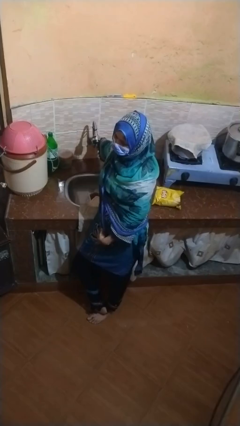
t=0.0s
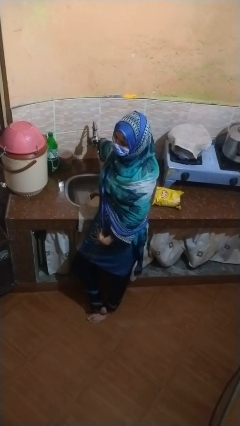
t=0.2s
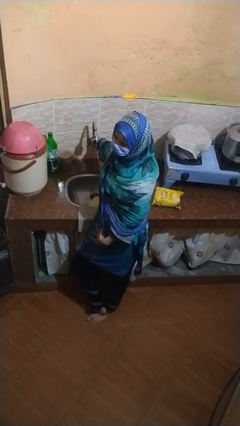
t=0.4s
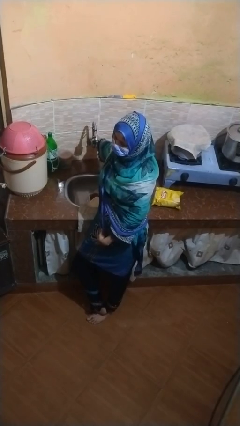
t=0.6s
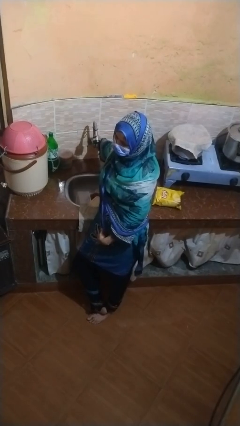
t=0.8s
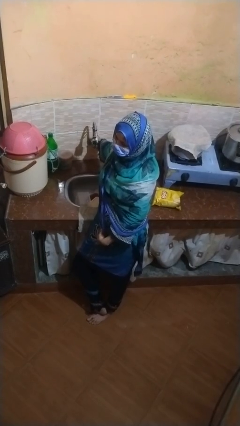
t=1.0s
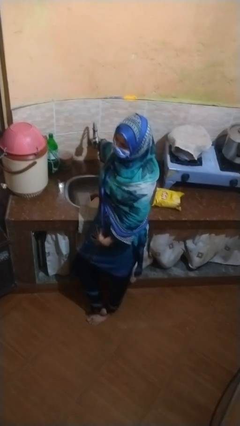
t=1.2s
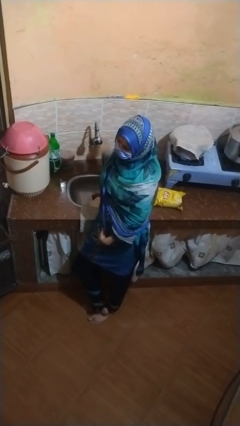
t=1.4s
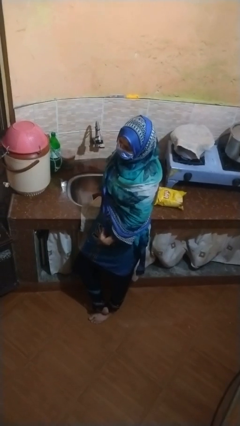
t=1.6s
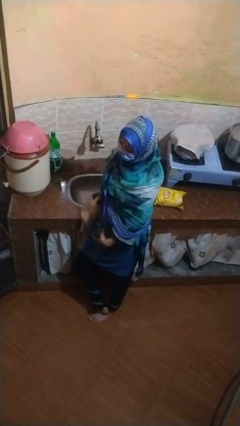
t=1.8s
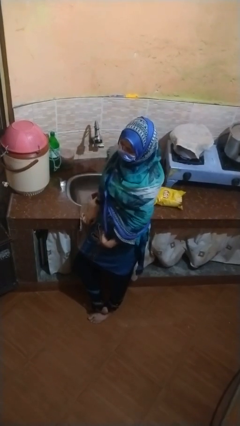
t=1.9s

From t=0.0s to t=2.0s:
person turns off faucet

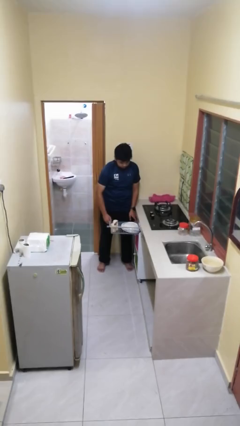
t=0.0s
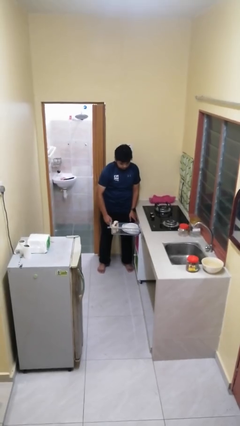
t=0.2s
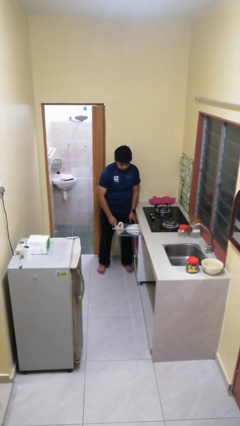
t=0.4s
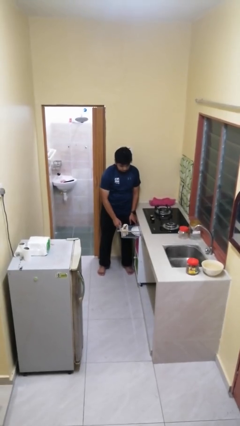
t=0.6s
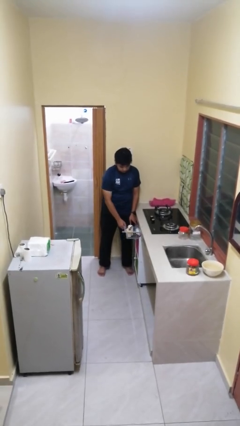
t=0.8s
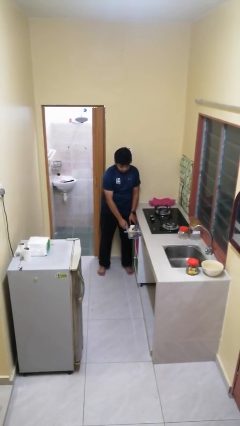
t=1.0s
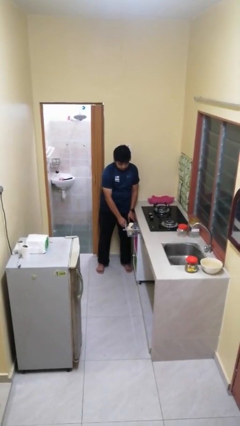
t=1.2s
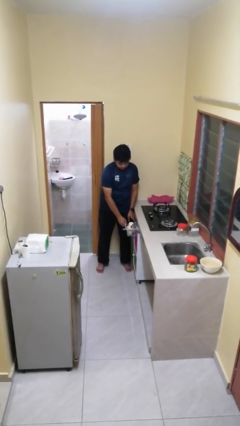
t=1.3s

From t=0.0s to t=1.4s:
person closes kitchen drawer

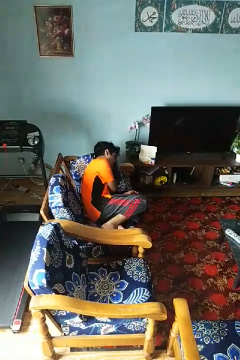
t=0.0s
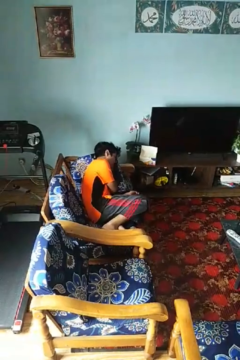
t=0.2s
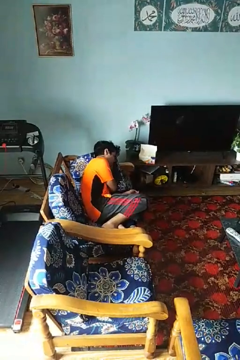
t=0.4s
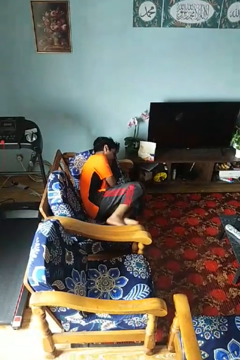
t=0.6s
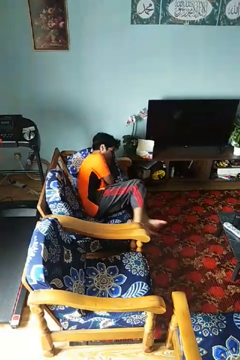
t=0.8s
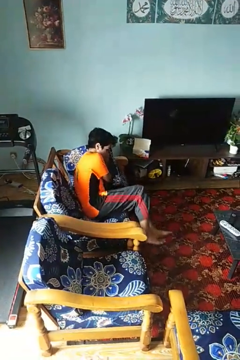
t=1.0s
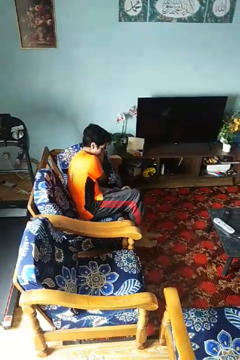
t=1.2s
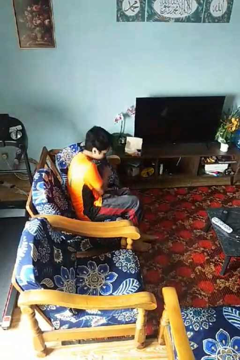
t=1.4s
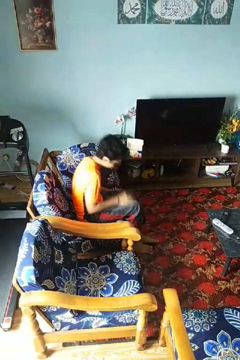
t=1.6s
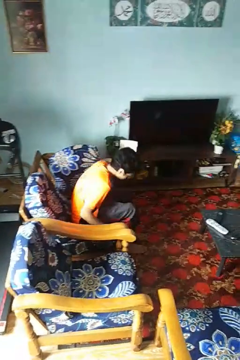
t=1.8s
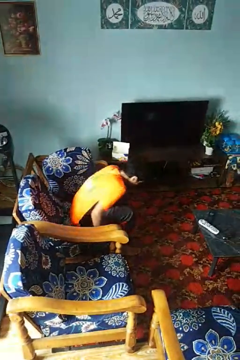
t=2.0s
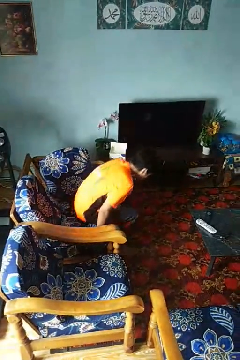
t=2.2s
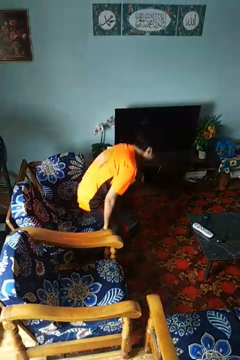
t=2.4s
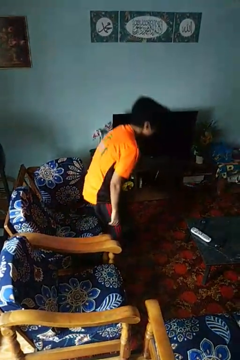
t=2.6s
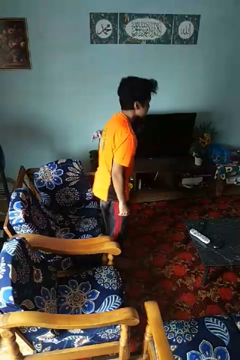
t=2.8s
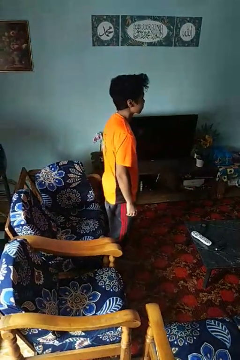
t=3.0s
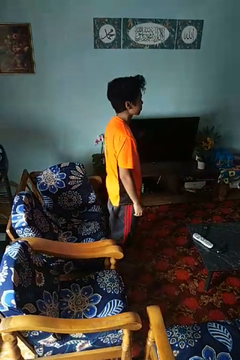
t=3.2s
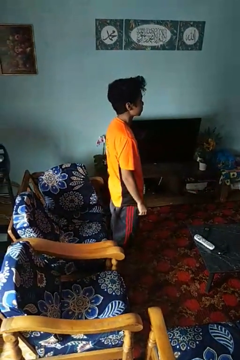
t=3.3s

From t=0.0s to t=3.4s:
person stands up

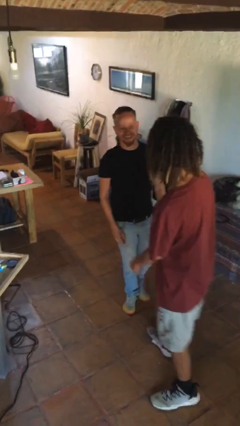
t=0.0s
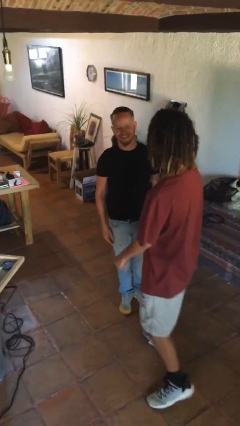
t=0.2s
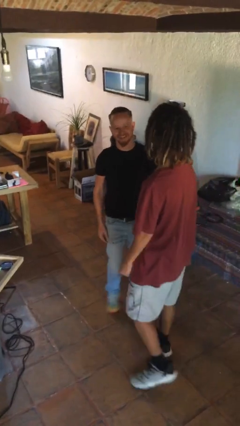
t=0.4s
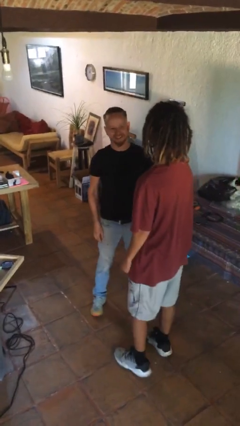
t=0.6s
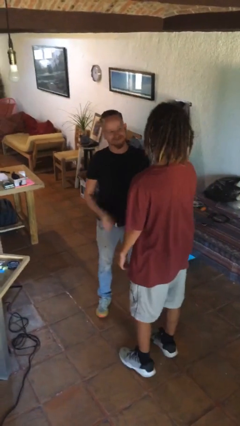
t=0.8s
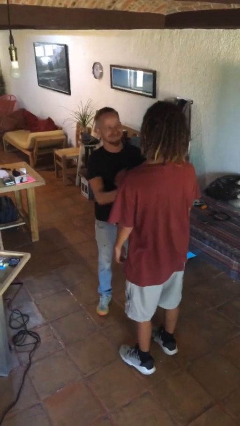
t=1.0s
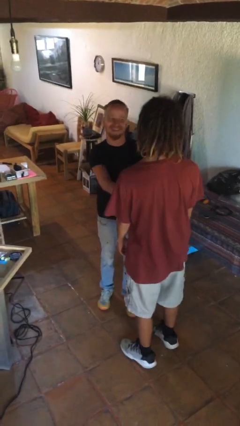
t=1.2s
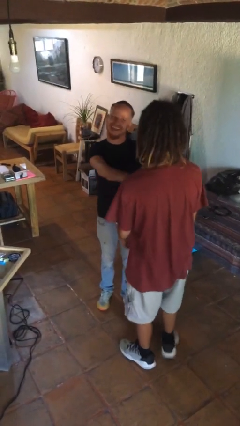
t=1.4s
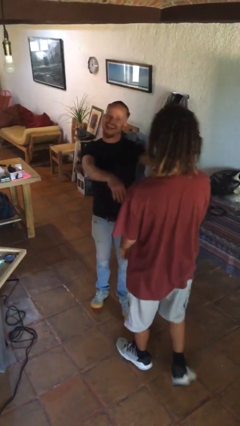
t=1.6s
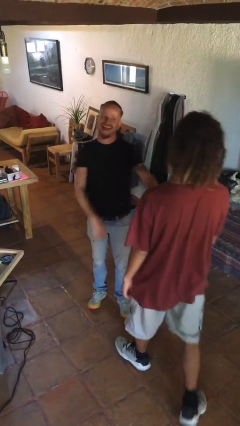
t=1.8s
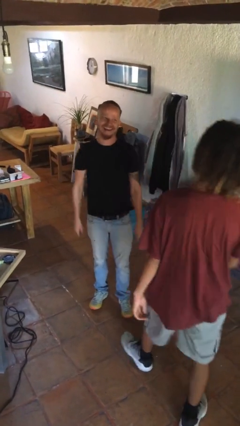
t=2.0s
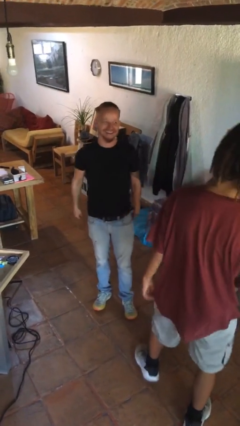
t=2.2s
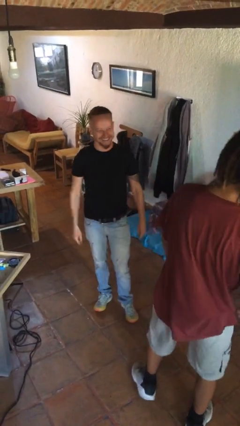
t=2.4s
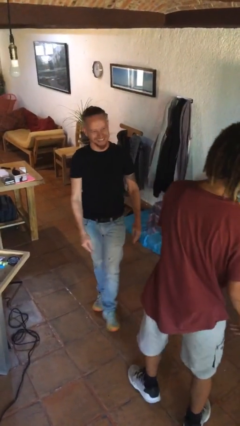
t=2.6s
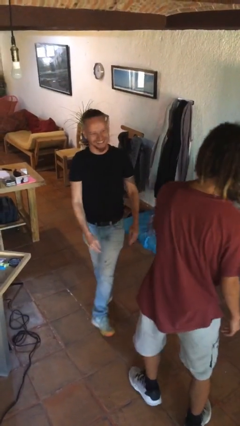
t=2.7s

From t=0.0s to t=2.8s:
person shoves person

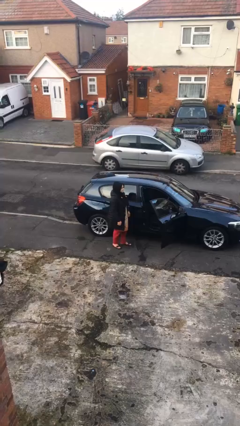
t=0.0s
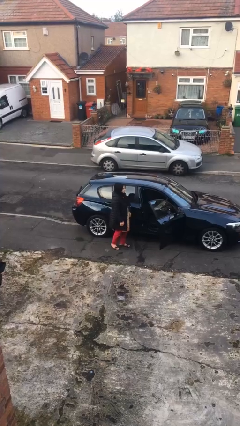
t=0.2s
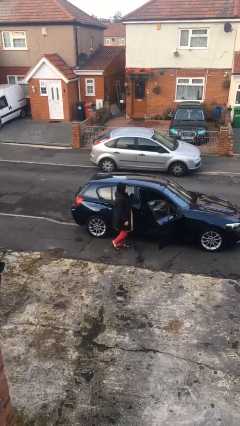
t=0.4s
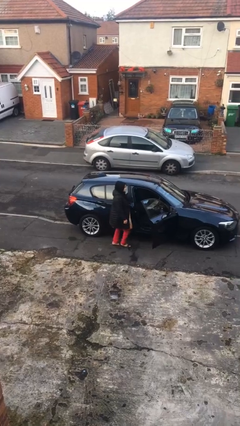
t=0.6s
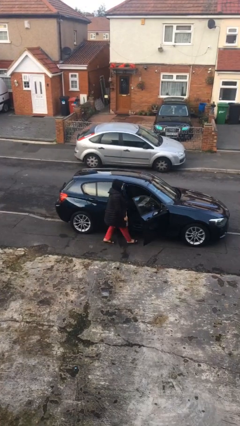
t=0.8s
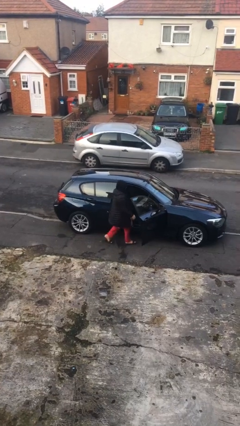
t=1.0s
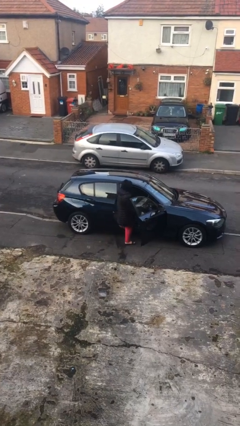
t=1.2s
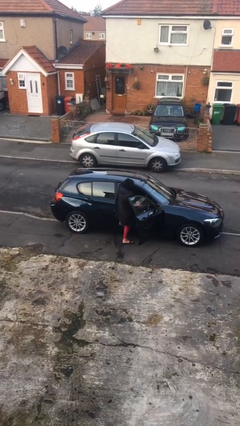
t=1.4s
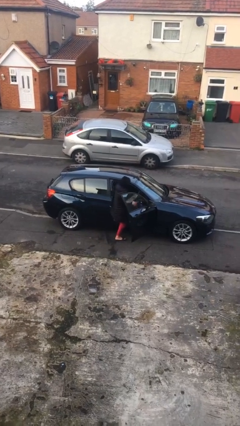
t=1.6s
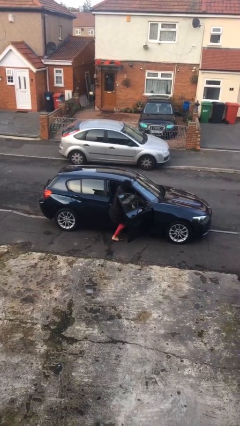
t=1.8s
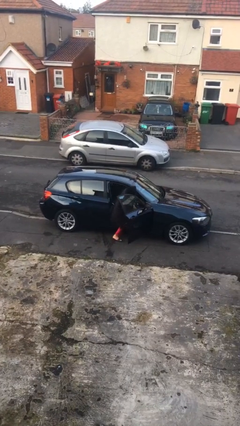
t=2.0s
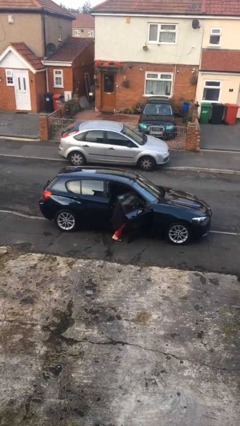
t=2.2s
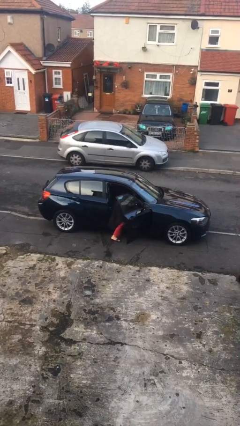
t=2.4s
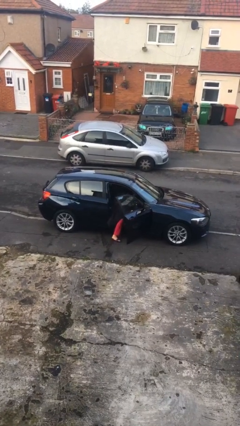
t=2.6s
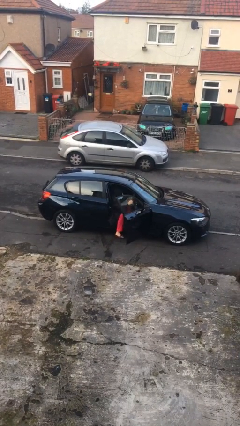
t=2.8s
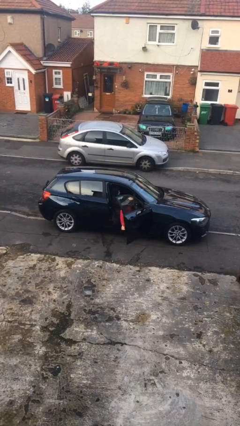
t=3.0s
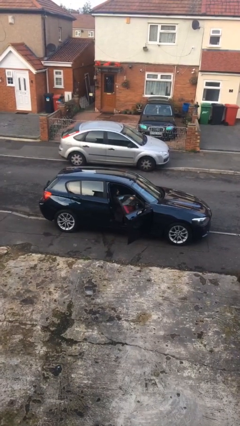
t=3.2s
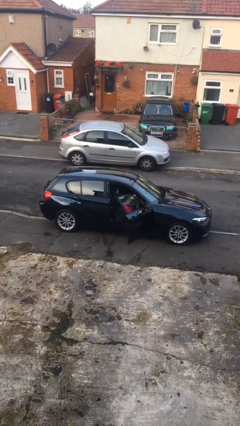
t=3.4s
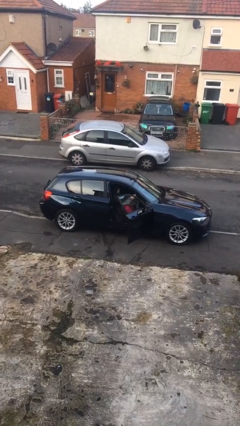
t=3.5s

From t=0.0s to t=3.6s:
person enters car

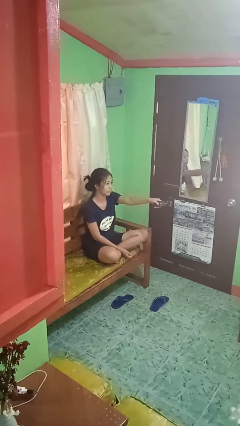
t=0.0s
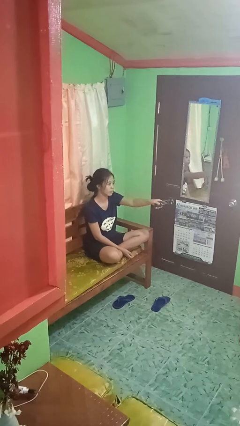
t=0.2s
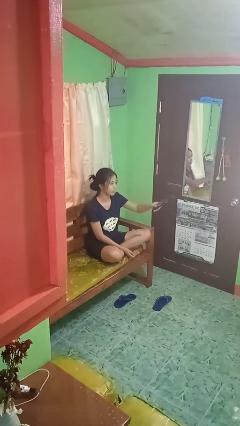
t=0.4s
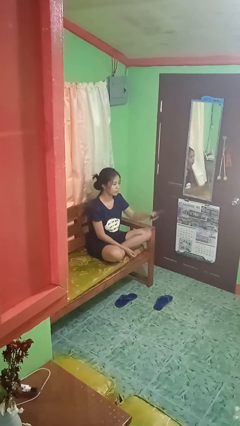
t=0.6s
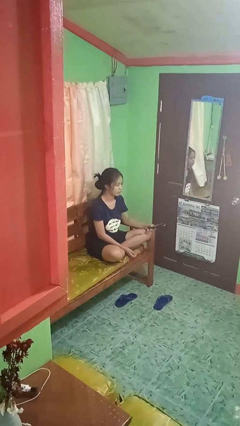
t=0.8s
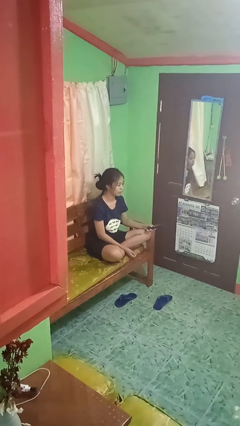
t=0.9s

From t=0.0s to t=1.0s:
person uses television remote

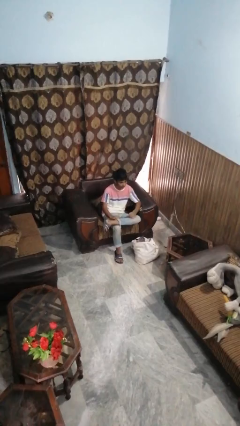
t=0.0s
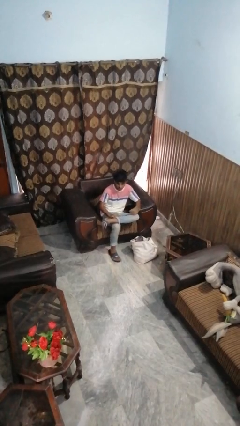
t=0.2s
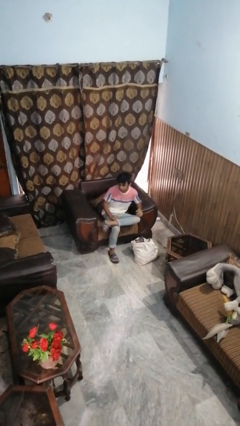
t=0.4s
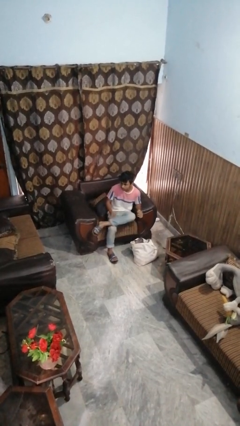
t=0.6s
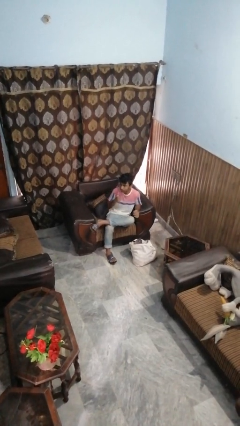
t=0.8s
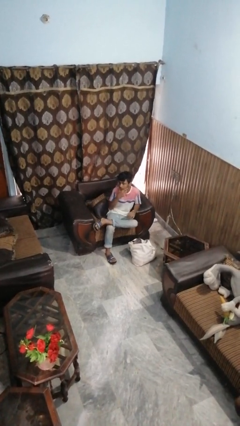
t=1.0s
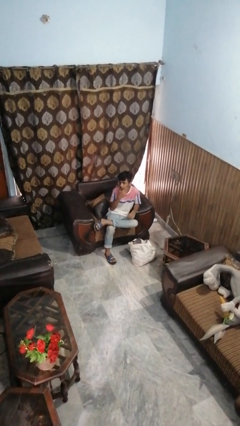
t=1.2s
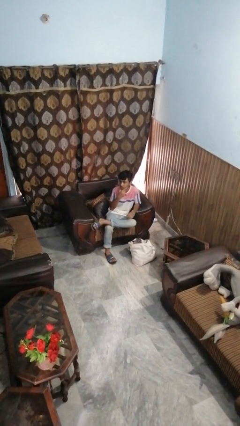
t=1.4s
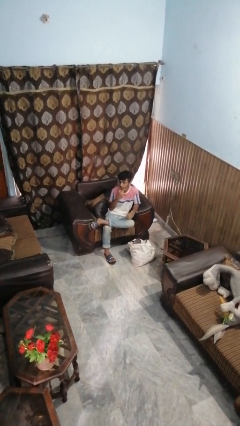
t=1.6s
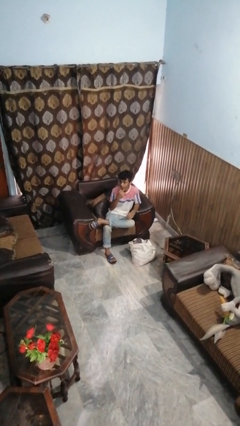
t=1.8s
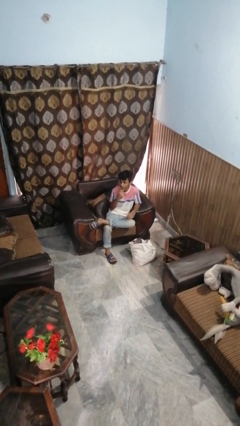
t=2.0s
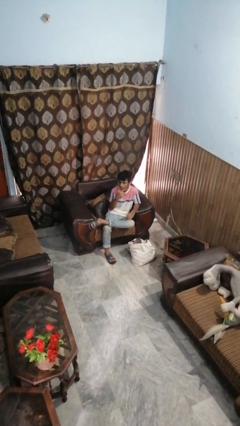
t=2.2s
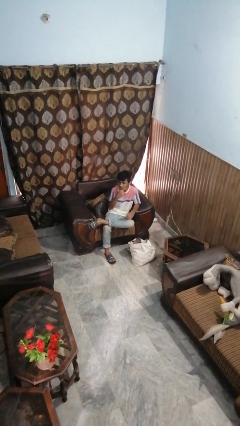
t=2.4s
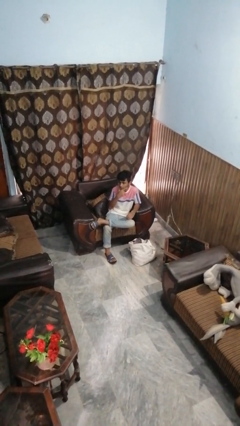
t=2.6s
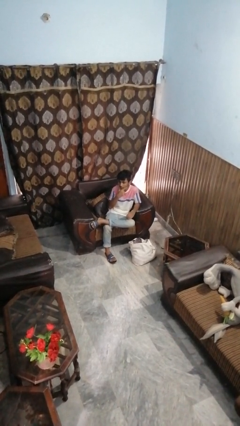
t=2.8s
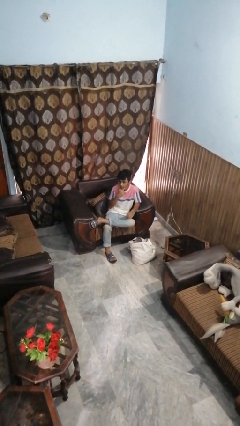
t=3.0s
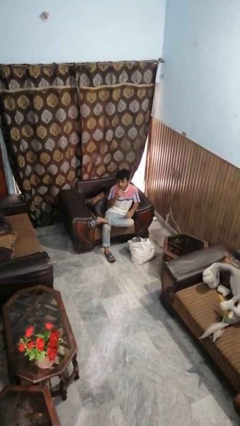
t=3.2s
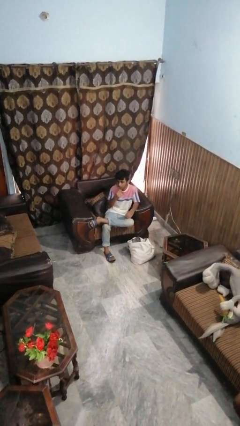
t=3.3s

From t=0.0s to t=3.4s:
person strokes chin

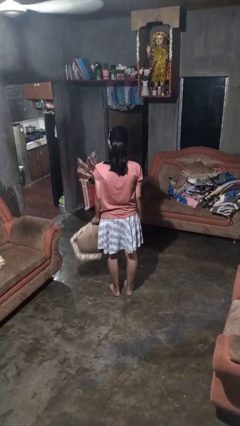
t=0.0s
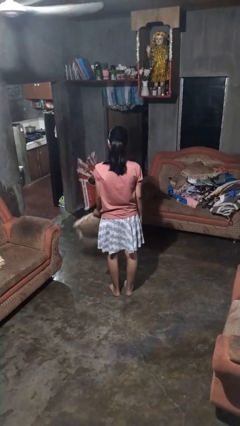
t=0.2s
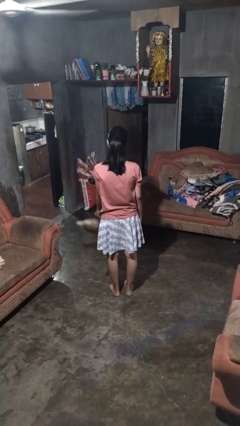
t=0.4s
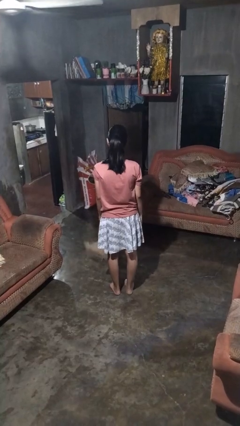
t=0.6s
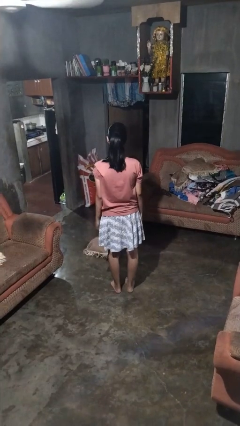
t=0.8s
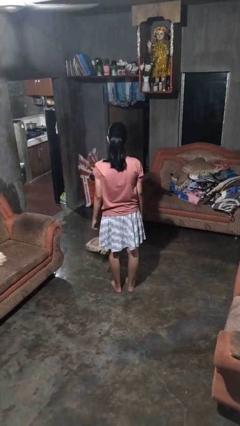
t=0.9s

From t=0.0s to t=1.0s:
person throws object to ground
